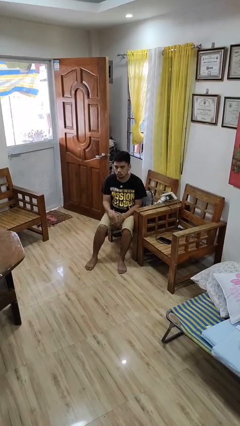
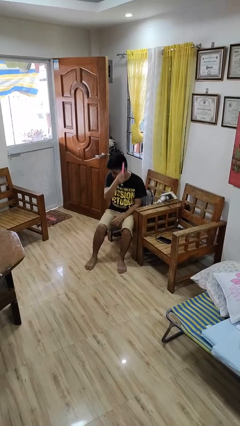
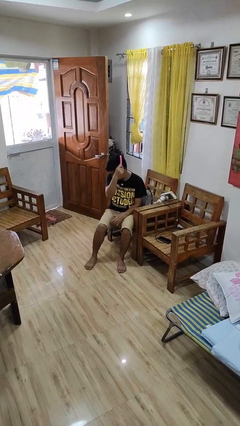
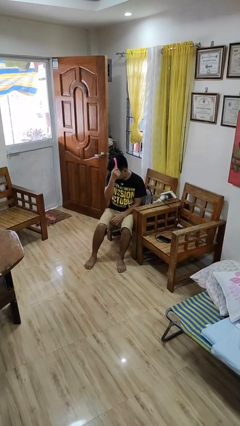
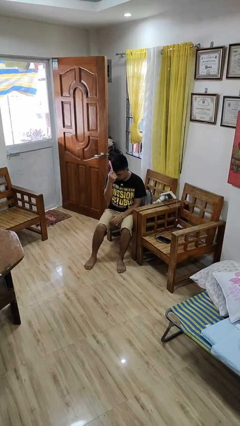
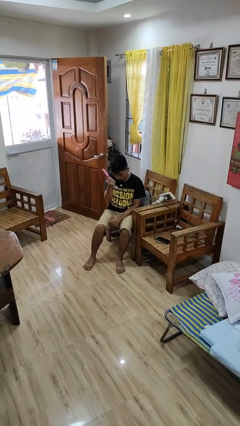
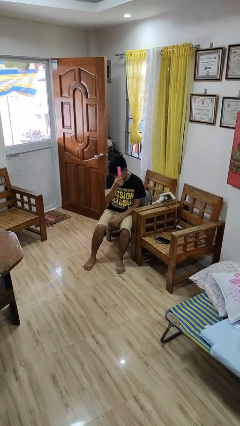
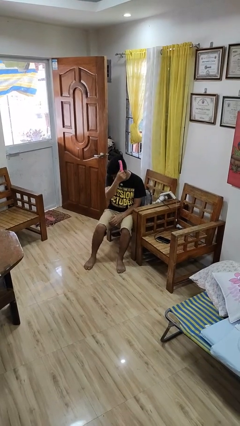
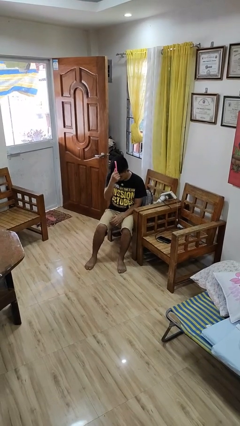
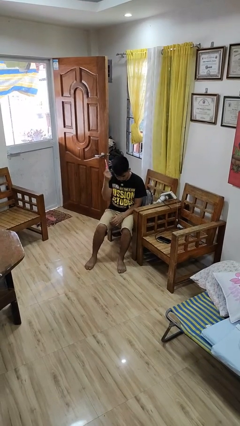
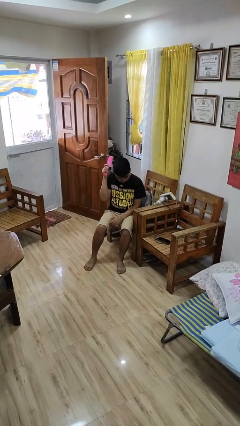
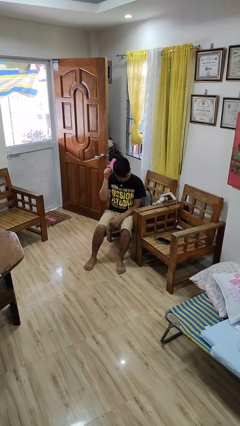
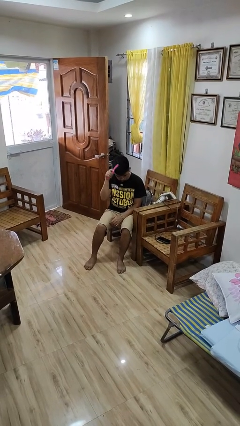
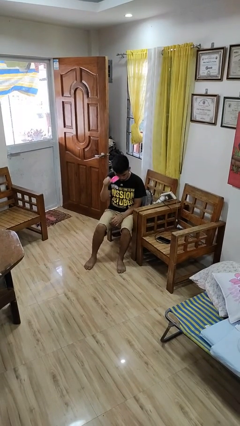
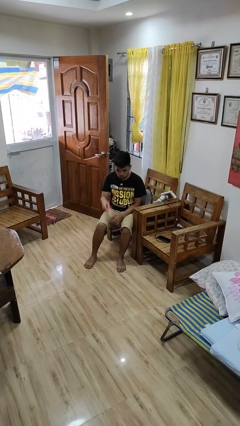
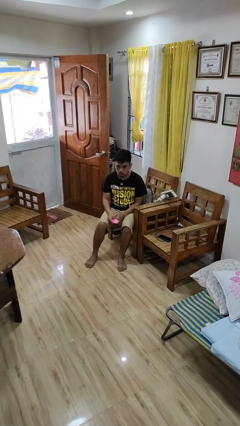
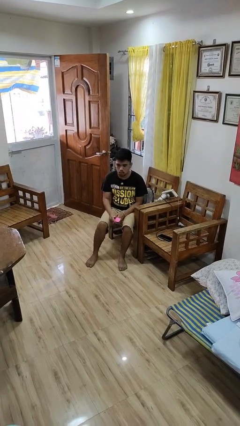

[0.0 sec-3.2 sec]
person brushes hair

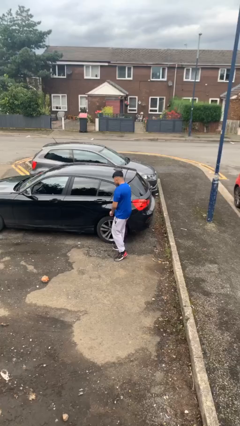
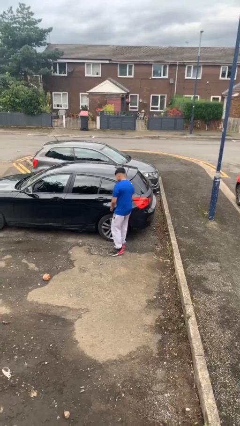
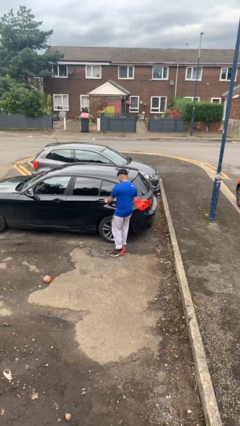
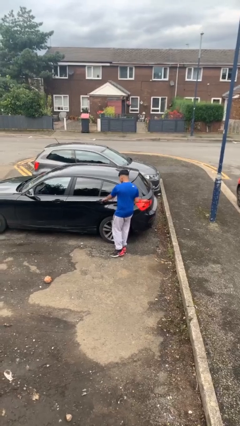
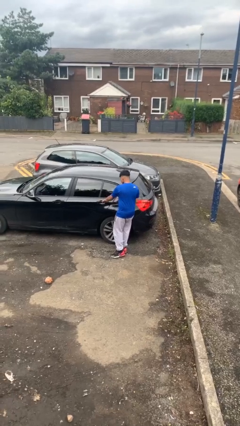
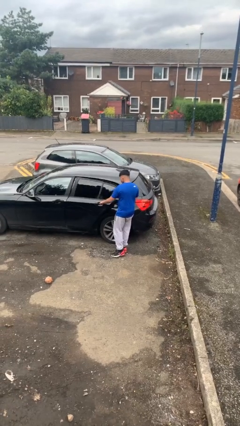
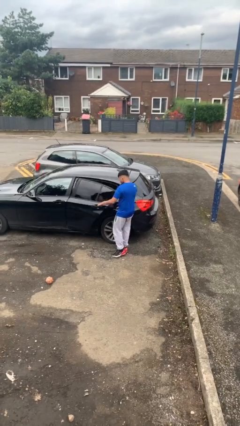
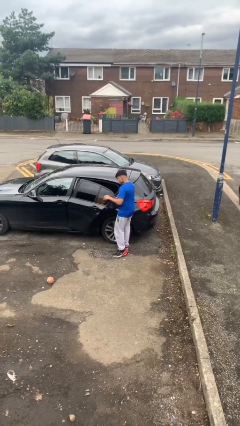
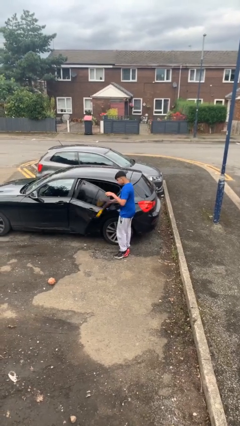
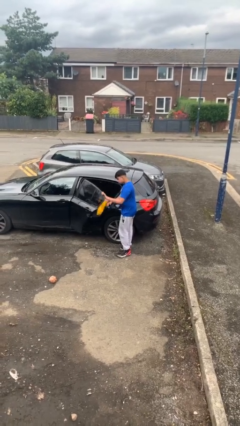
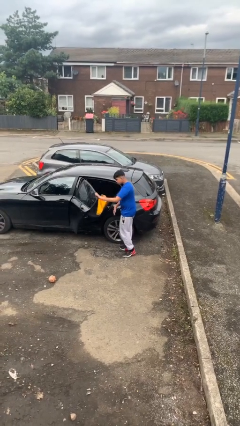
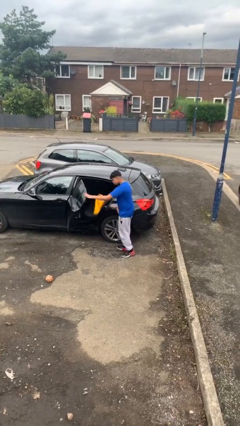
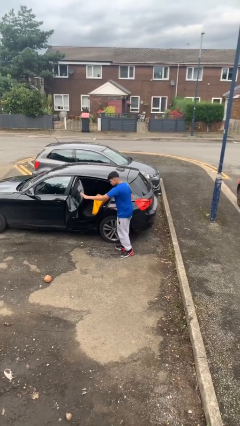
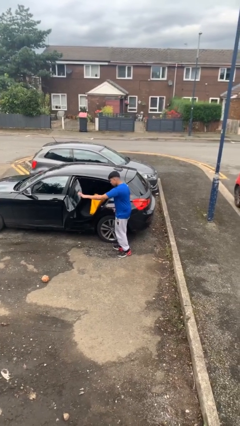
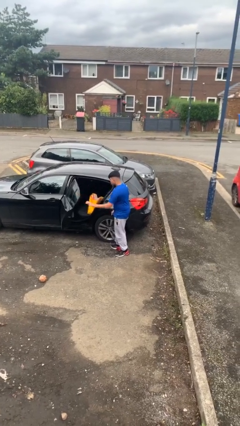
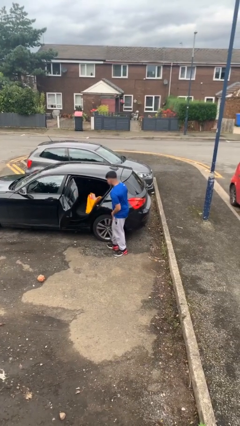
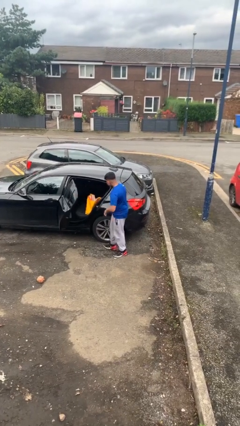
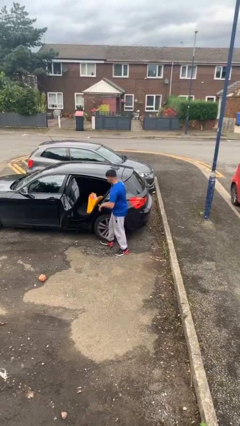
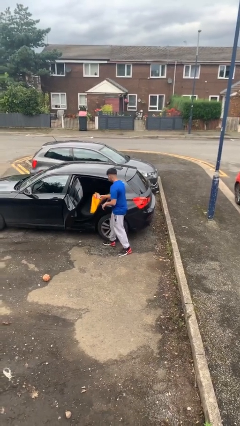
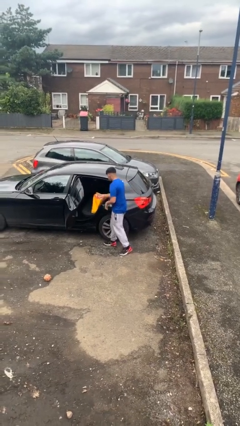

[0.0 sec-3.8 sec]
person opens car door

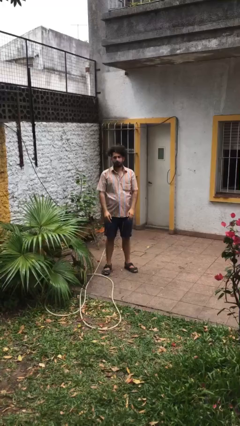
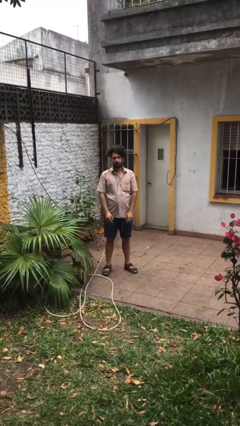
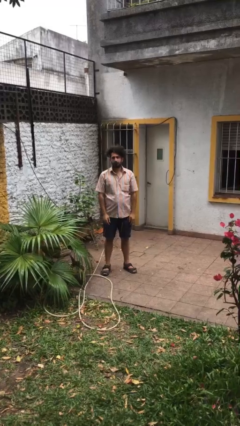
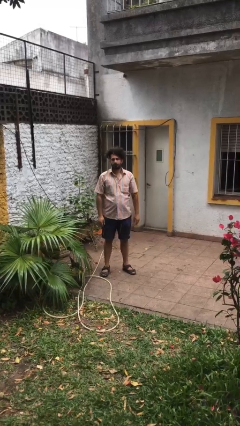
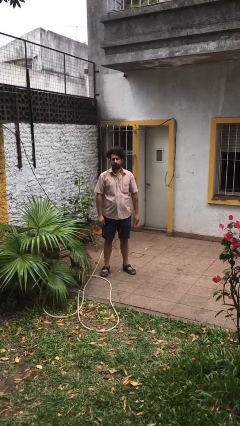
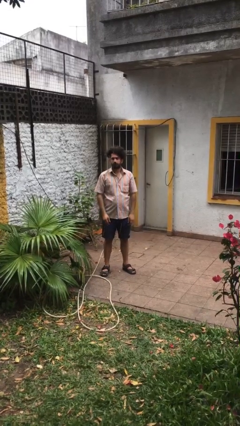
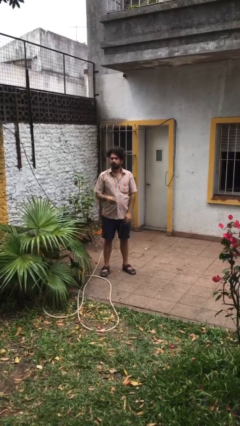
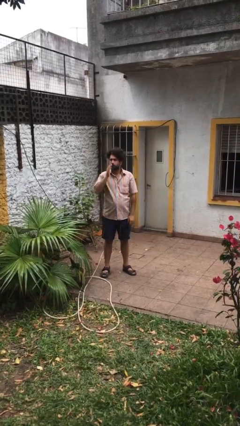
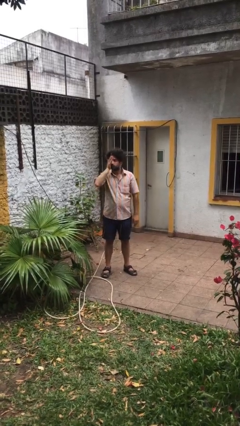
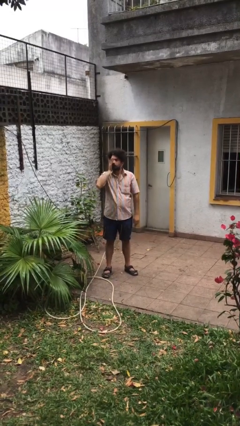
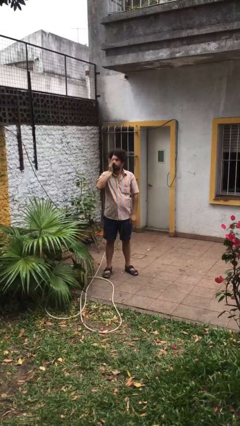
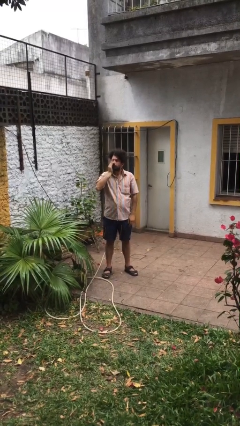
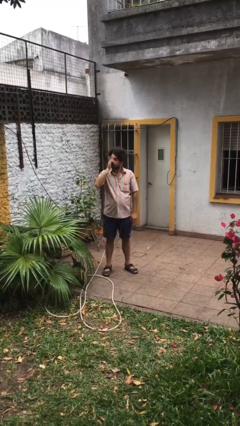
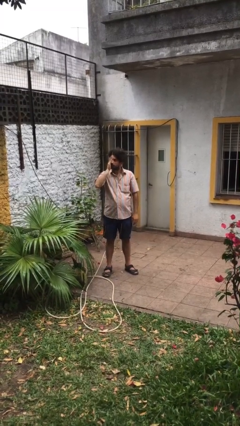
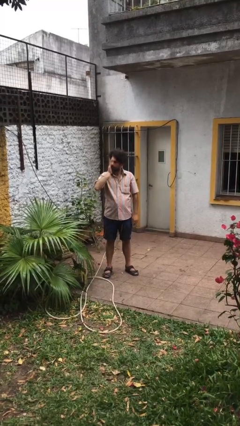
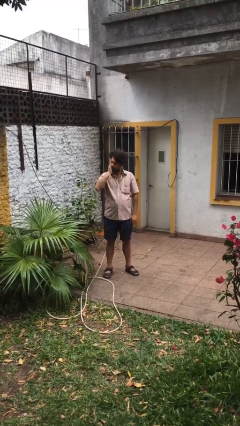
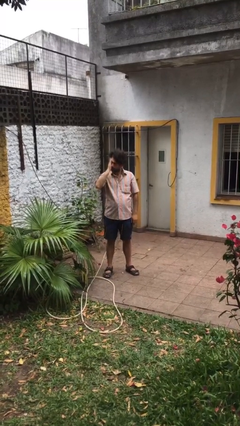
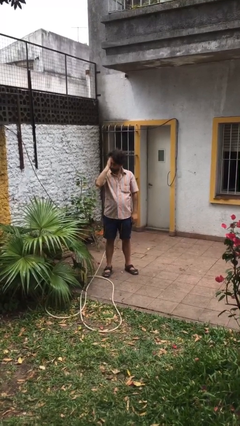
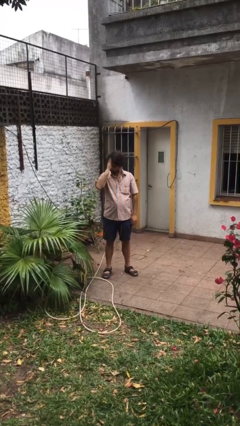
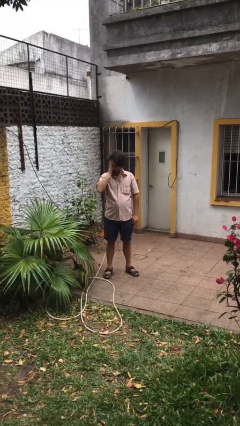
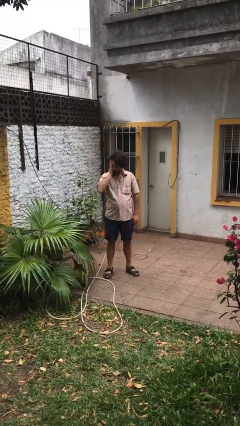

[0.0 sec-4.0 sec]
person rubs eyes

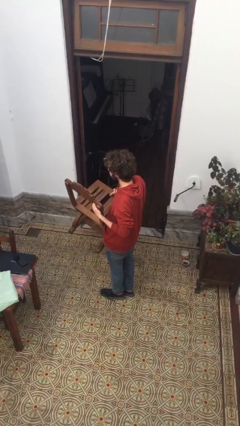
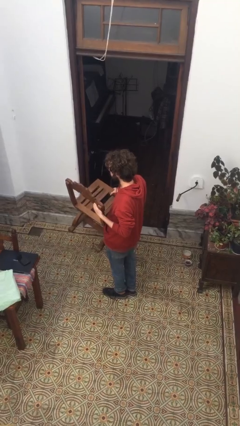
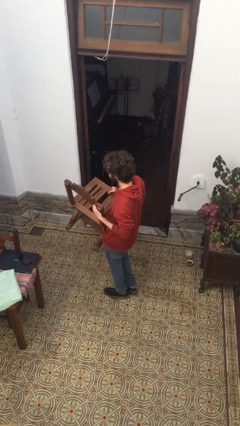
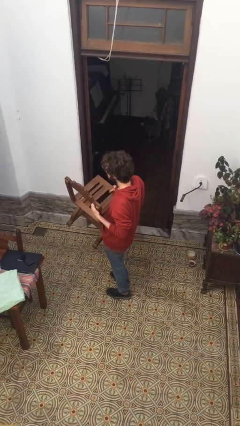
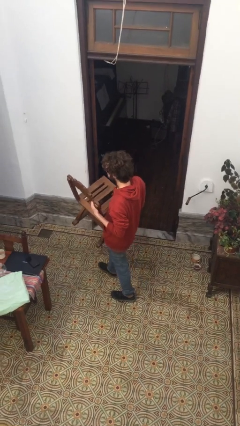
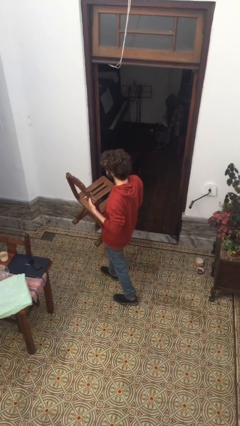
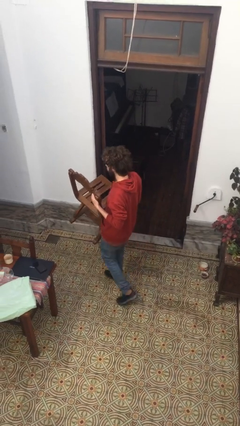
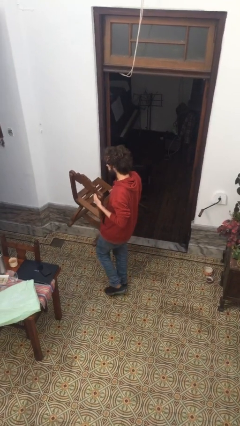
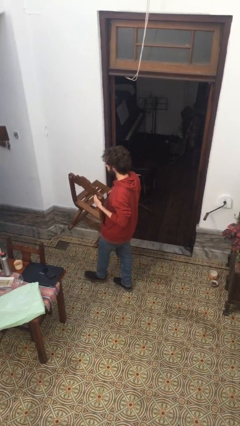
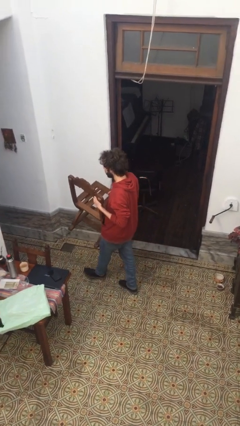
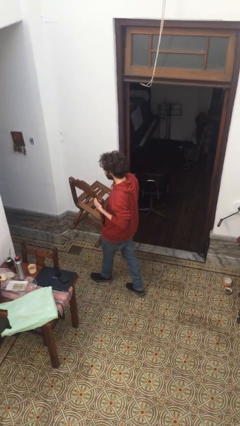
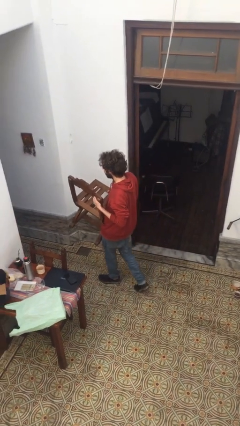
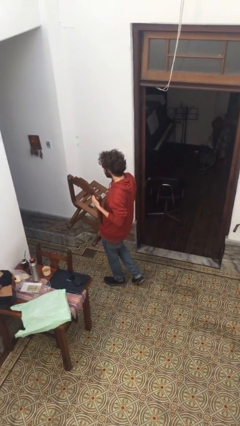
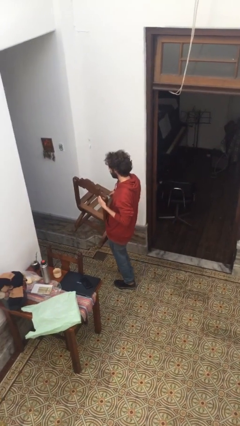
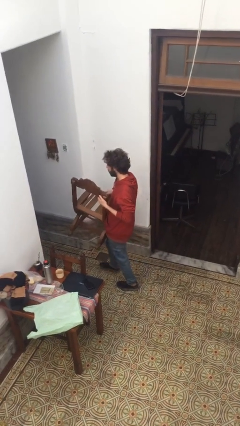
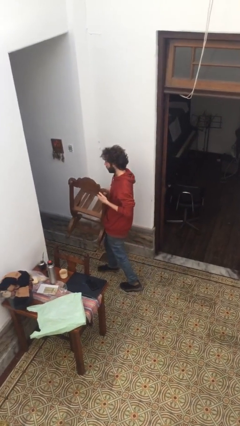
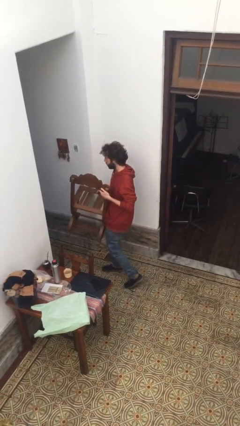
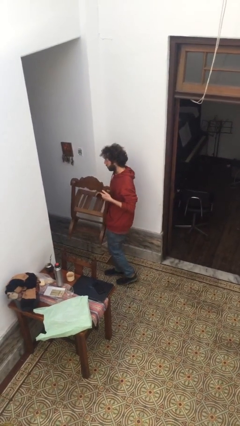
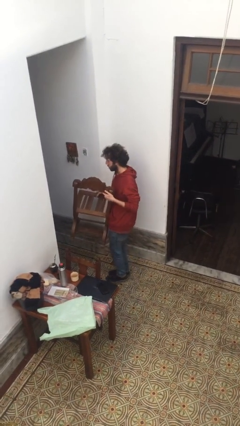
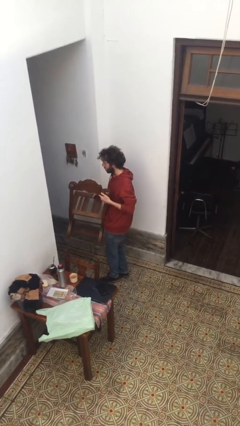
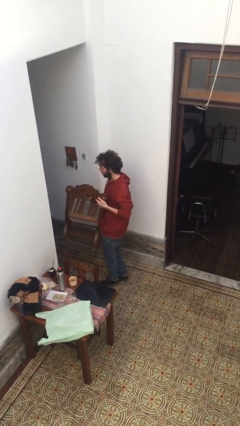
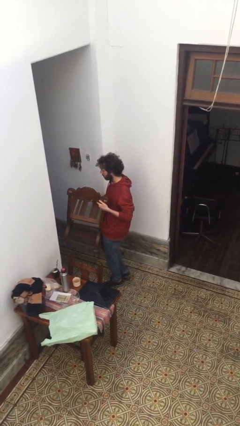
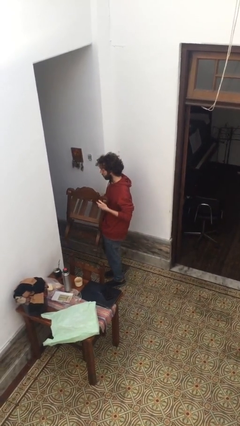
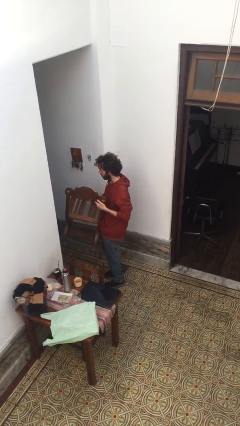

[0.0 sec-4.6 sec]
person carries furniture

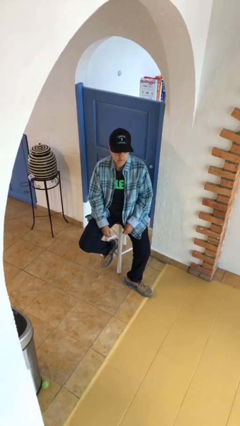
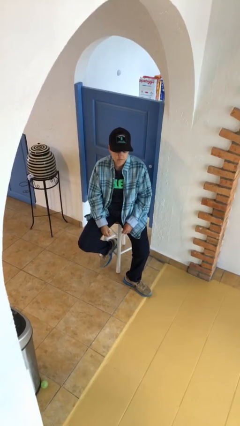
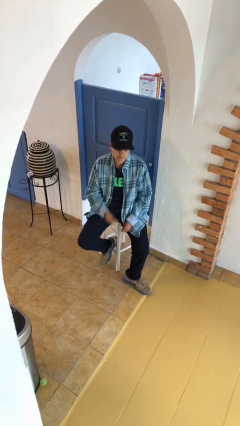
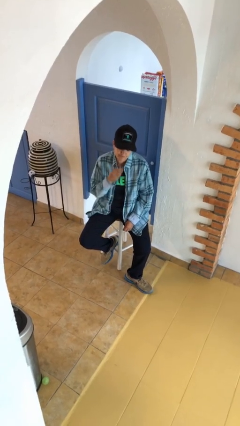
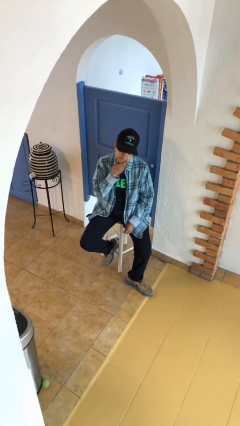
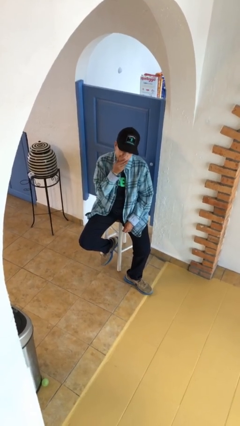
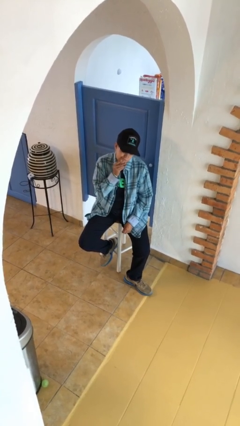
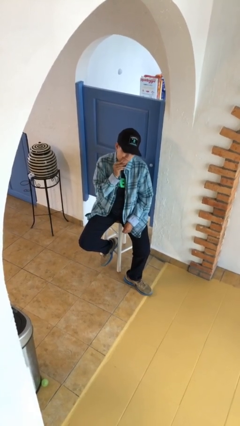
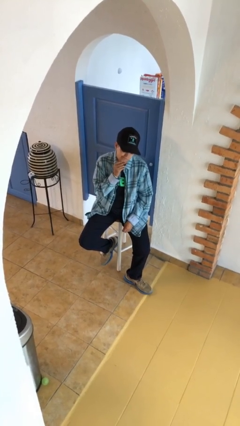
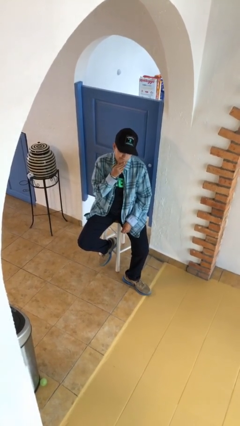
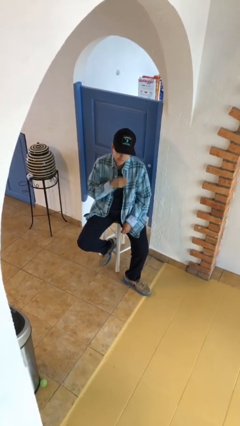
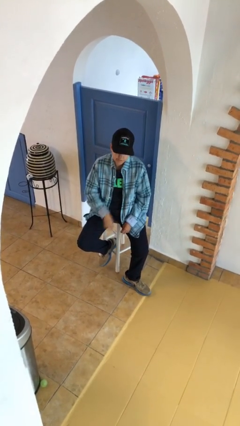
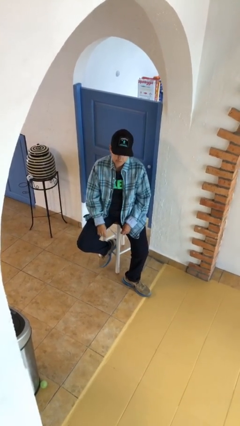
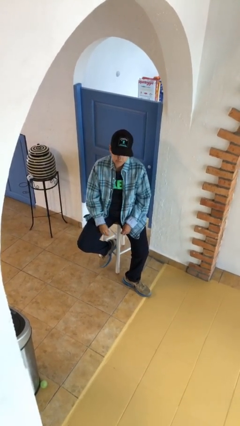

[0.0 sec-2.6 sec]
person strokes chin
